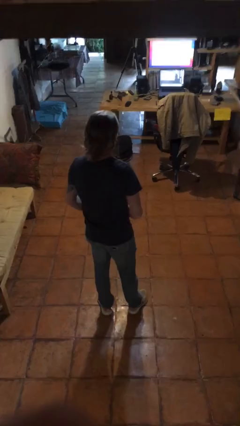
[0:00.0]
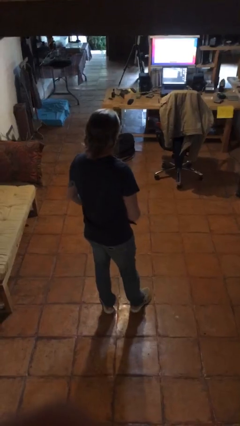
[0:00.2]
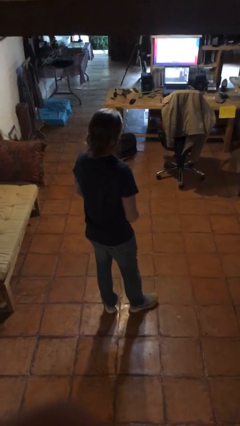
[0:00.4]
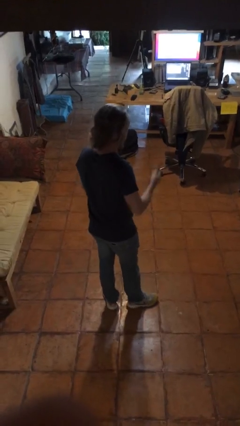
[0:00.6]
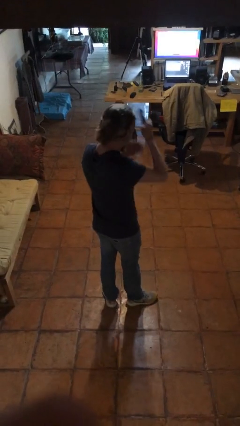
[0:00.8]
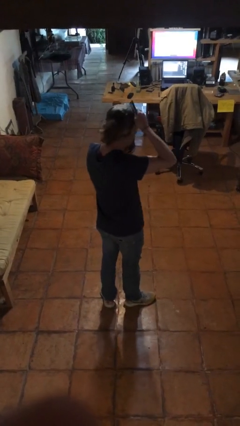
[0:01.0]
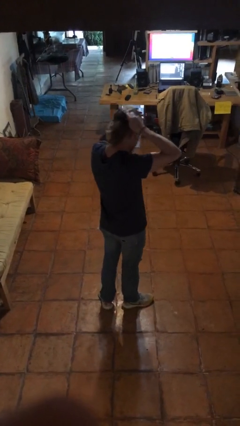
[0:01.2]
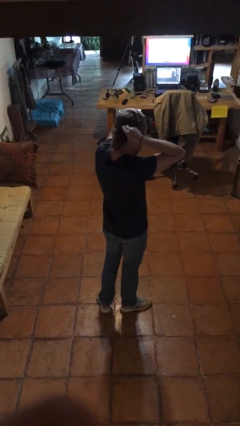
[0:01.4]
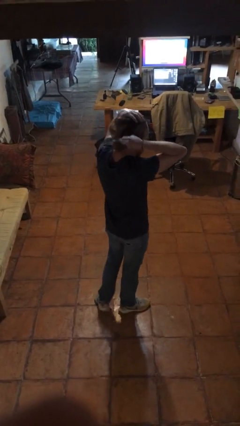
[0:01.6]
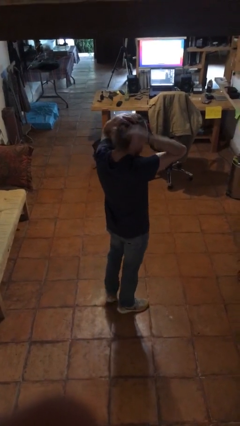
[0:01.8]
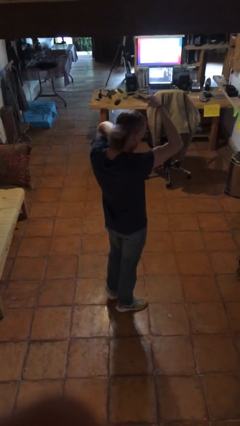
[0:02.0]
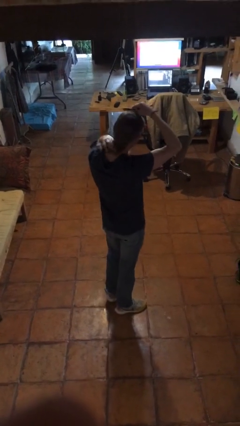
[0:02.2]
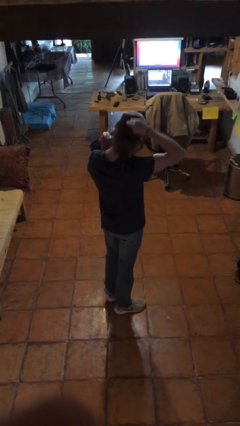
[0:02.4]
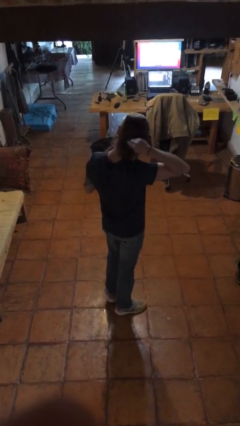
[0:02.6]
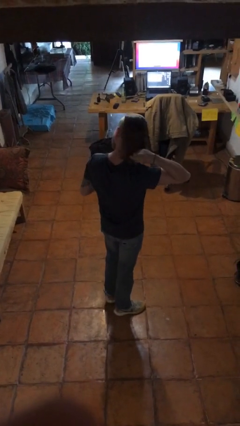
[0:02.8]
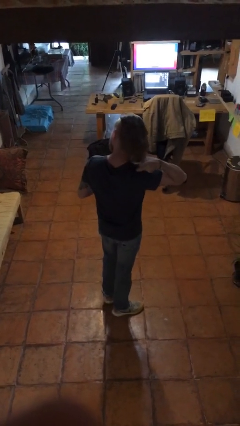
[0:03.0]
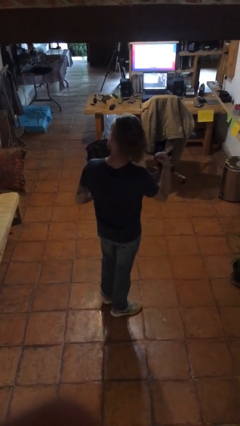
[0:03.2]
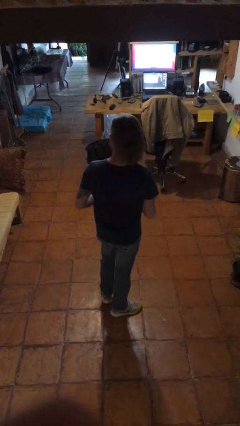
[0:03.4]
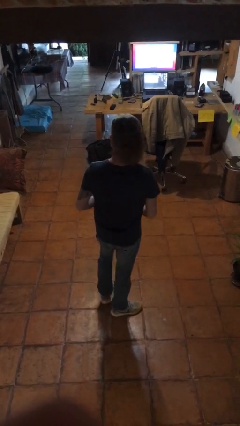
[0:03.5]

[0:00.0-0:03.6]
person brushes hair

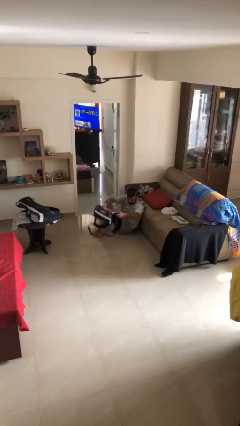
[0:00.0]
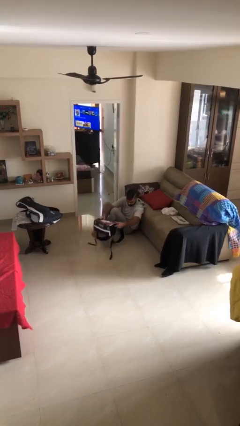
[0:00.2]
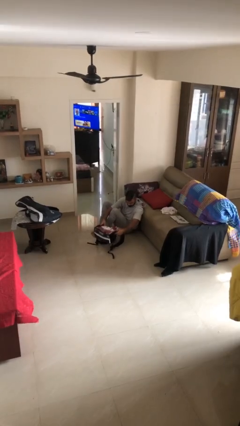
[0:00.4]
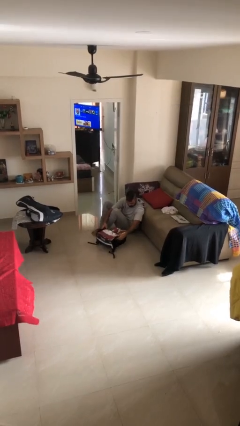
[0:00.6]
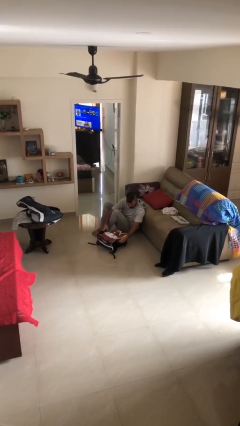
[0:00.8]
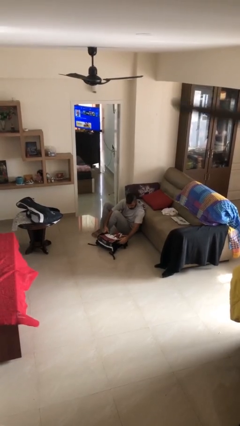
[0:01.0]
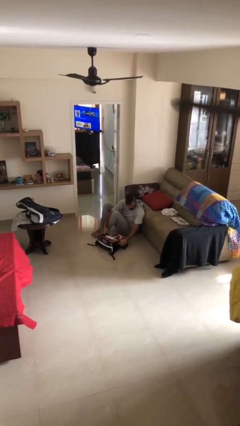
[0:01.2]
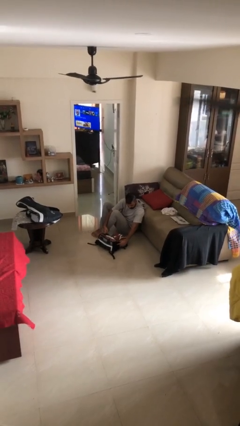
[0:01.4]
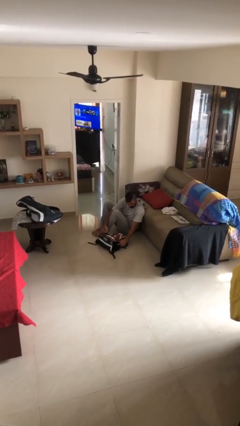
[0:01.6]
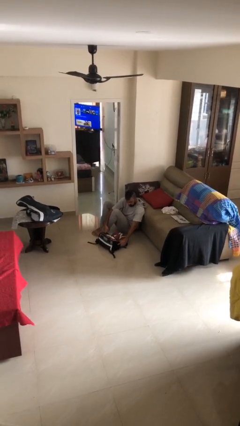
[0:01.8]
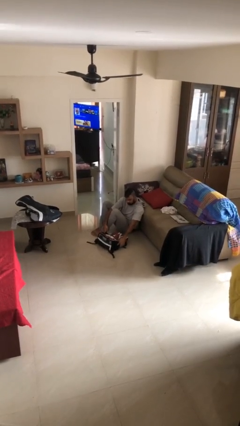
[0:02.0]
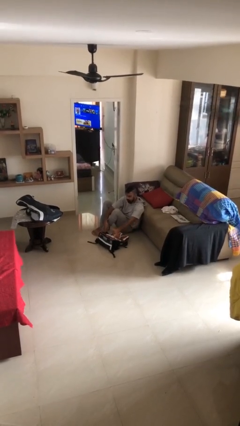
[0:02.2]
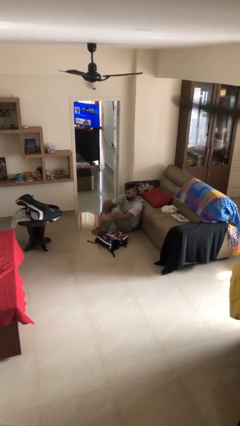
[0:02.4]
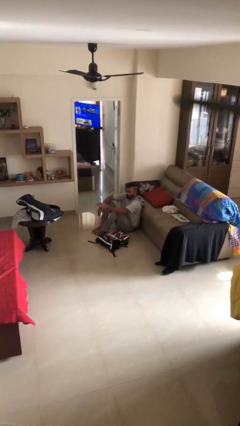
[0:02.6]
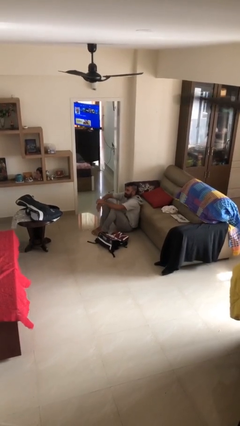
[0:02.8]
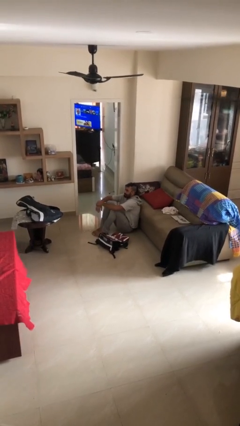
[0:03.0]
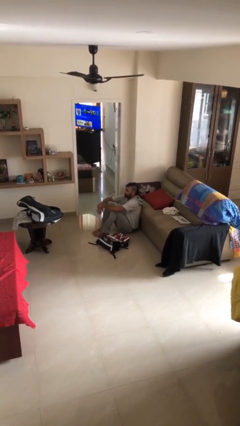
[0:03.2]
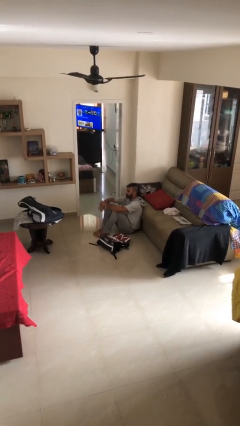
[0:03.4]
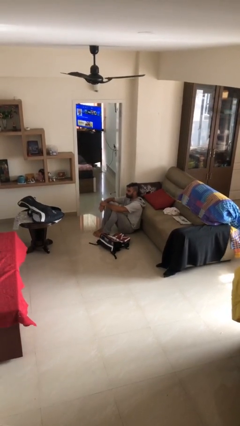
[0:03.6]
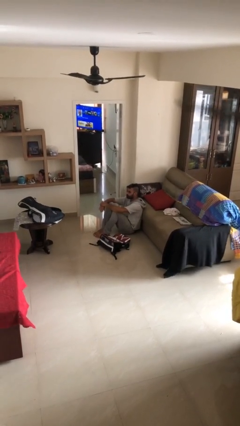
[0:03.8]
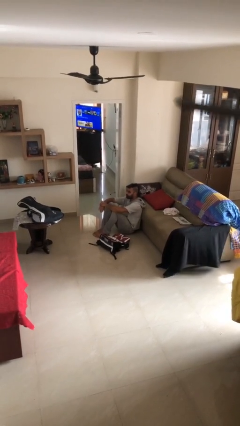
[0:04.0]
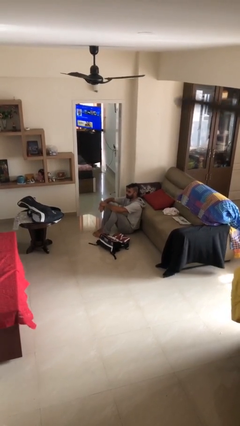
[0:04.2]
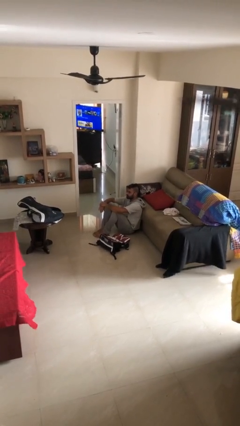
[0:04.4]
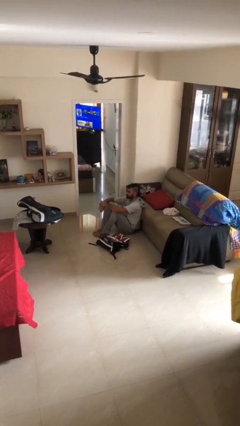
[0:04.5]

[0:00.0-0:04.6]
person puts down object on floor

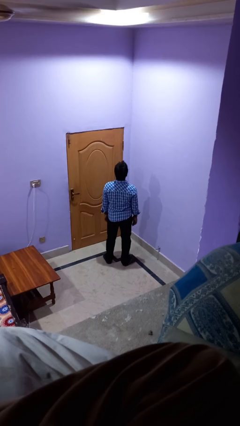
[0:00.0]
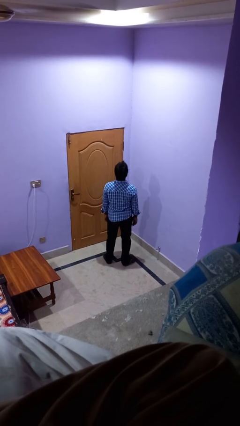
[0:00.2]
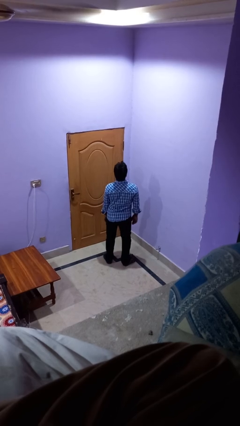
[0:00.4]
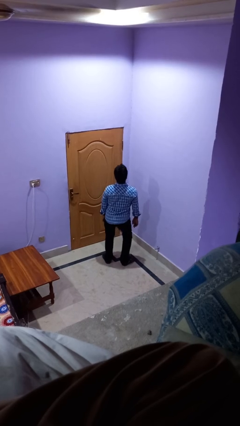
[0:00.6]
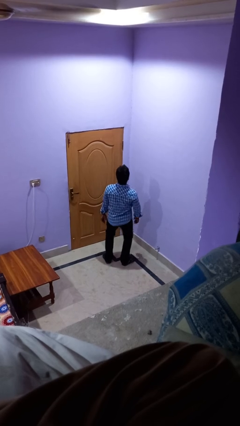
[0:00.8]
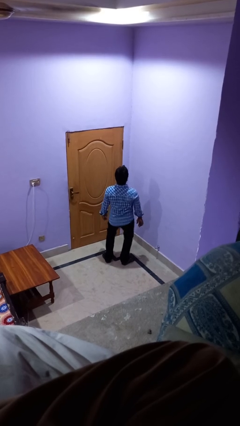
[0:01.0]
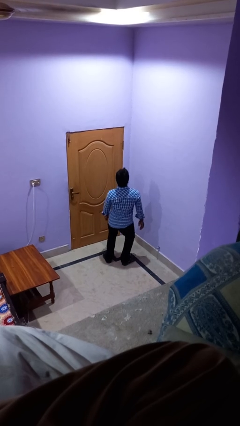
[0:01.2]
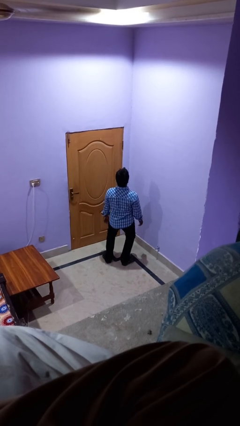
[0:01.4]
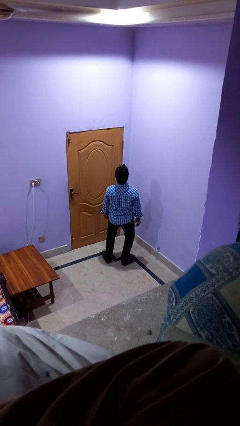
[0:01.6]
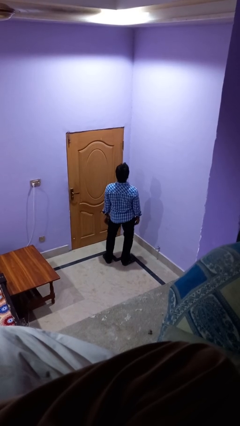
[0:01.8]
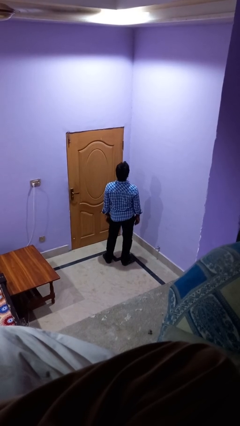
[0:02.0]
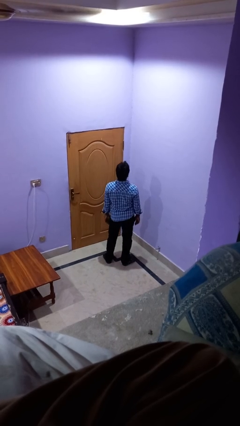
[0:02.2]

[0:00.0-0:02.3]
person wiggles hips

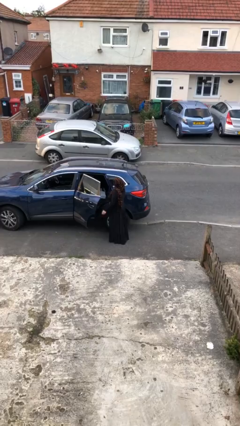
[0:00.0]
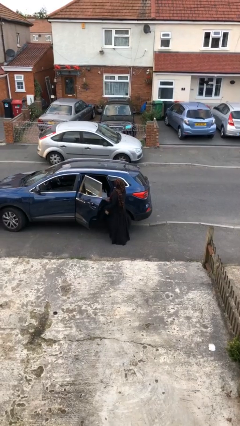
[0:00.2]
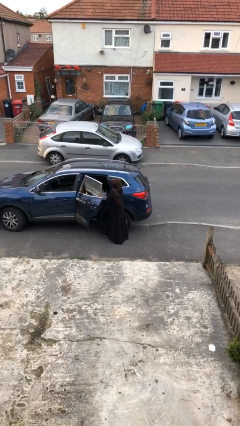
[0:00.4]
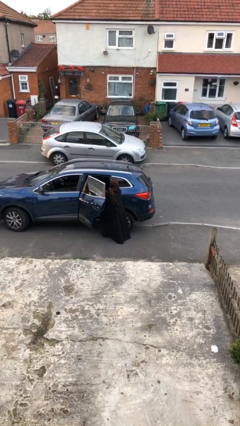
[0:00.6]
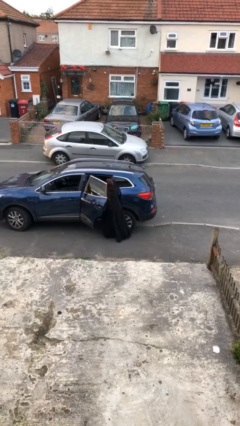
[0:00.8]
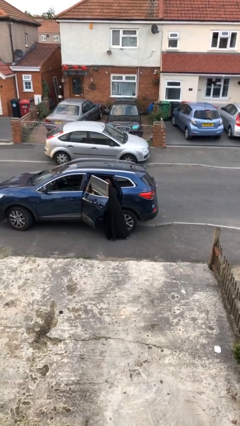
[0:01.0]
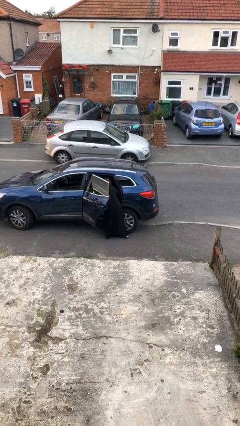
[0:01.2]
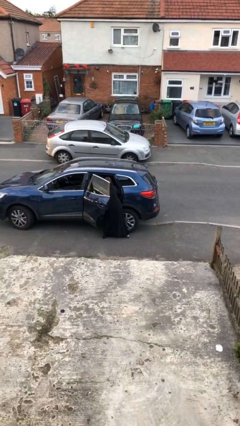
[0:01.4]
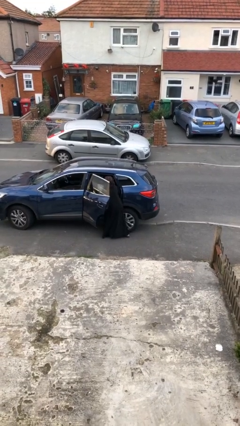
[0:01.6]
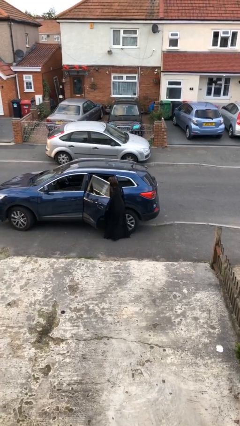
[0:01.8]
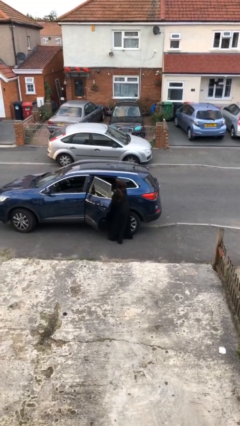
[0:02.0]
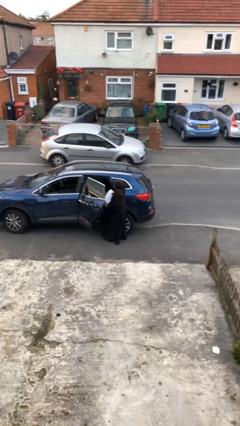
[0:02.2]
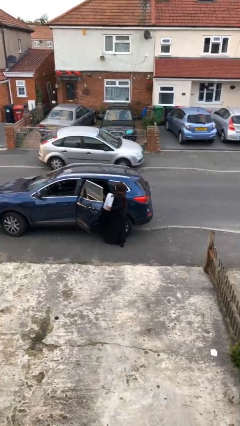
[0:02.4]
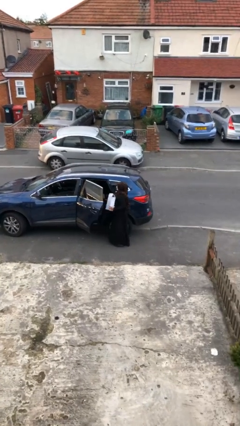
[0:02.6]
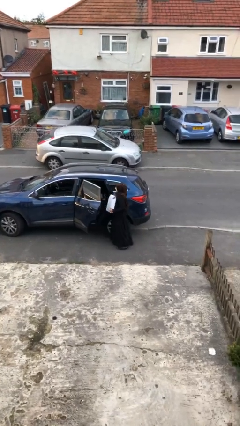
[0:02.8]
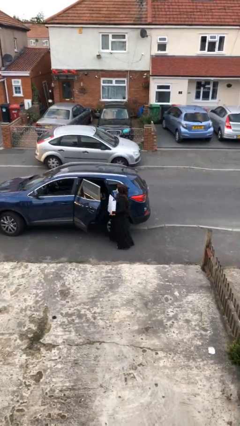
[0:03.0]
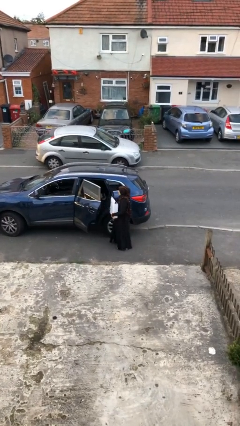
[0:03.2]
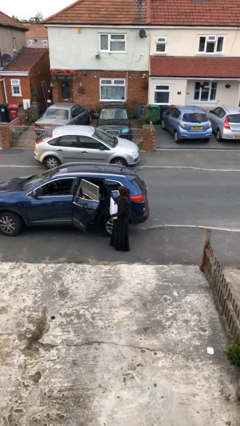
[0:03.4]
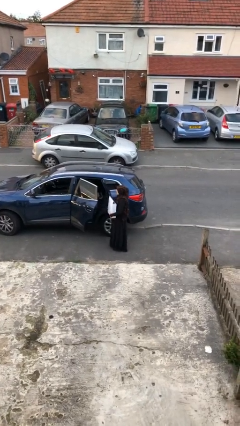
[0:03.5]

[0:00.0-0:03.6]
person unloads car

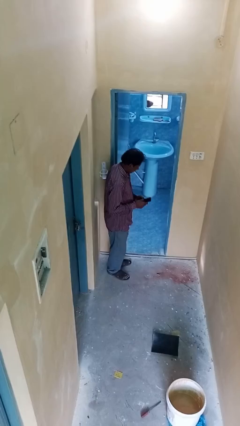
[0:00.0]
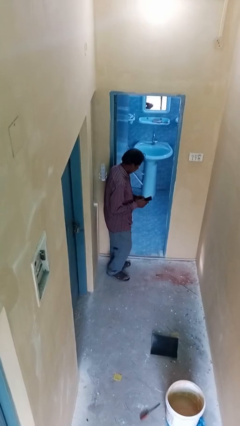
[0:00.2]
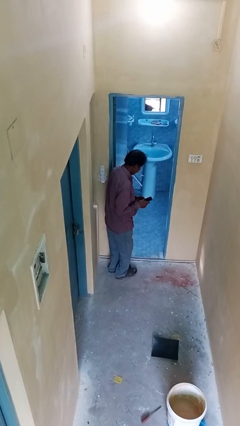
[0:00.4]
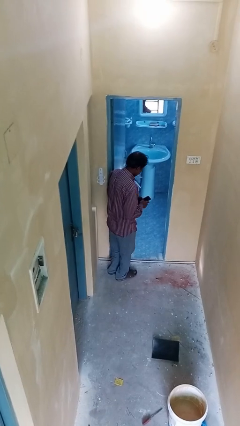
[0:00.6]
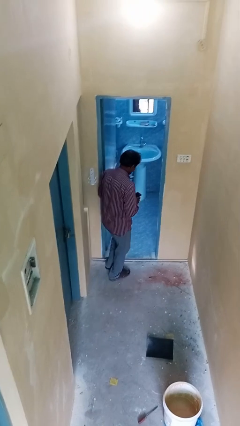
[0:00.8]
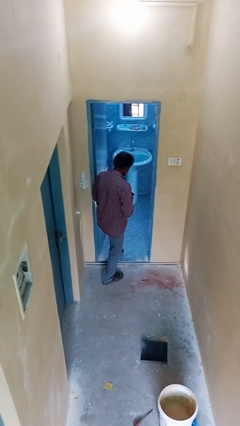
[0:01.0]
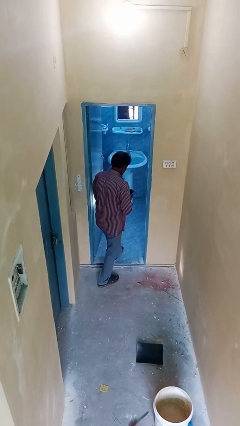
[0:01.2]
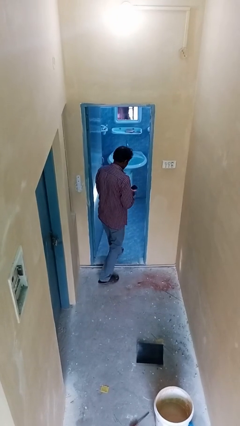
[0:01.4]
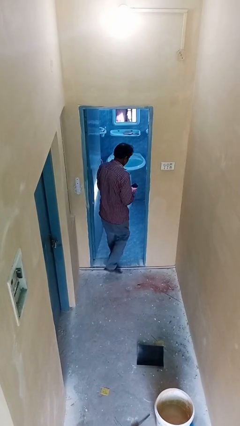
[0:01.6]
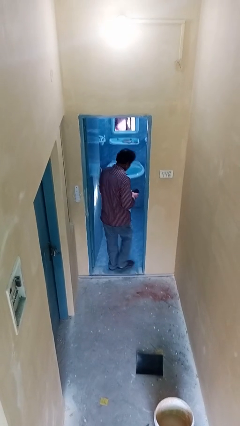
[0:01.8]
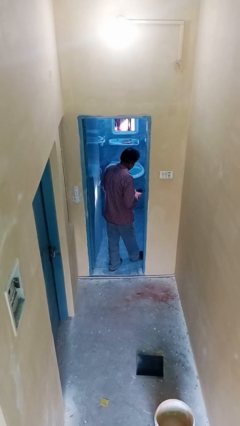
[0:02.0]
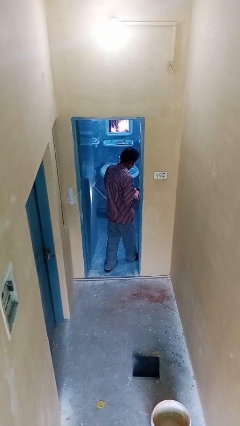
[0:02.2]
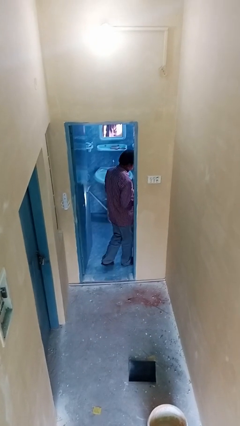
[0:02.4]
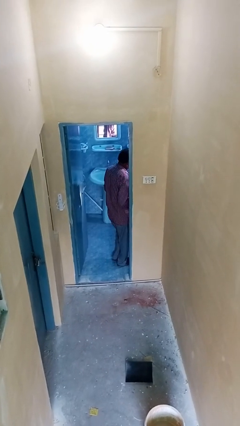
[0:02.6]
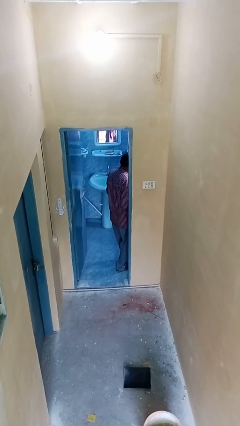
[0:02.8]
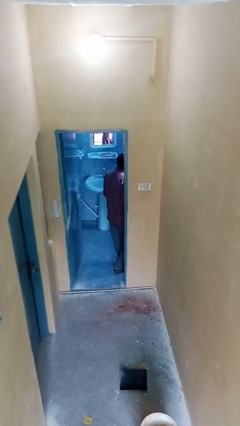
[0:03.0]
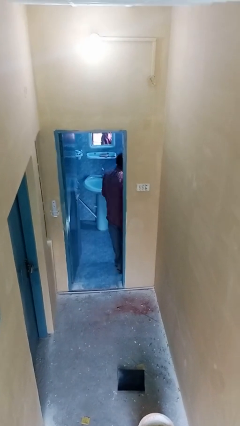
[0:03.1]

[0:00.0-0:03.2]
person exits scene through structure

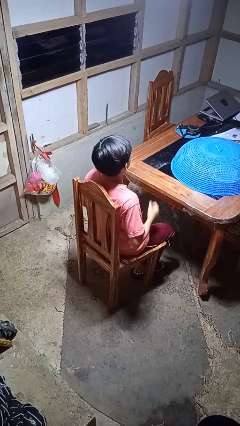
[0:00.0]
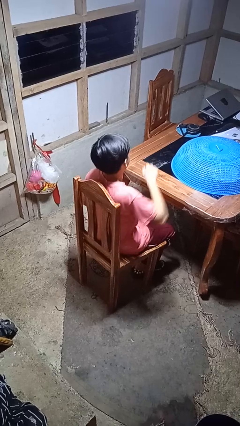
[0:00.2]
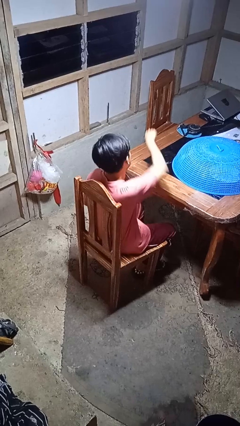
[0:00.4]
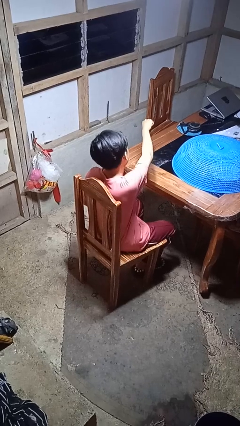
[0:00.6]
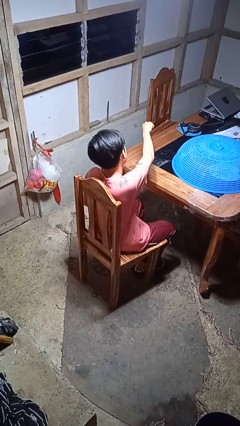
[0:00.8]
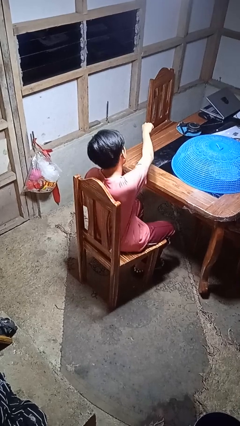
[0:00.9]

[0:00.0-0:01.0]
person punches
